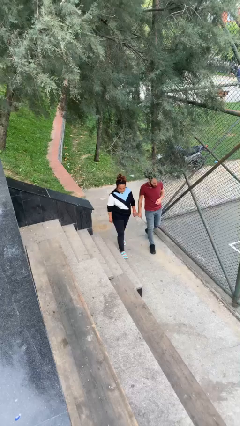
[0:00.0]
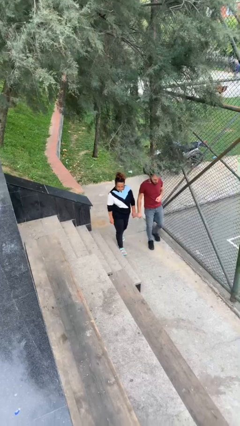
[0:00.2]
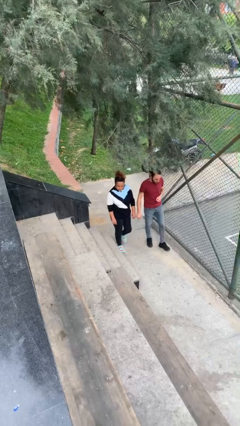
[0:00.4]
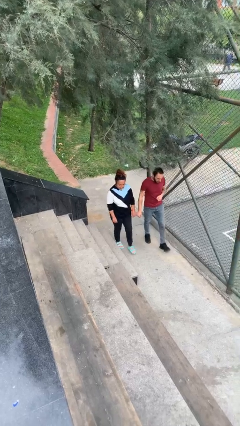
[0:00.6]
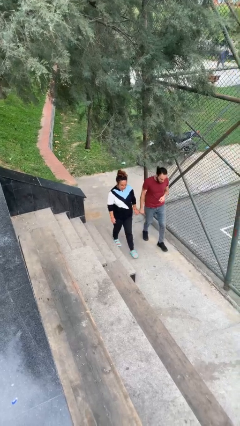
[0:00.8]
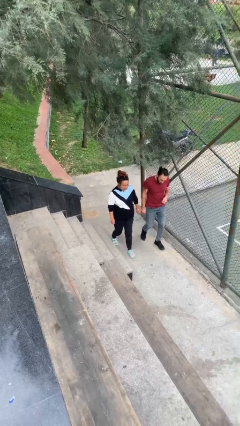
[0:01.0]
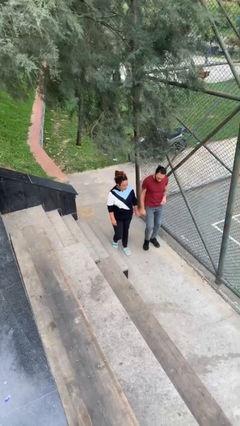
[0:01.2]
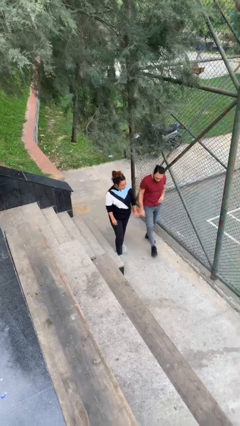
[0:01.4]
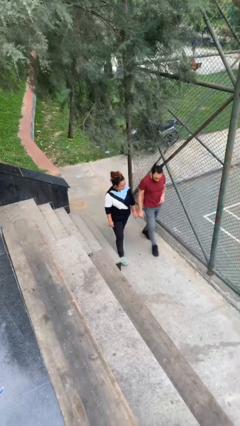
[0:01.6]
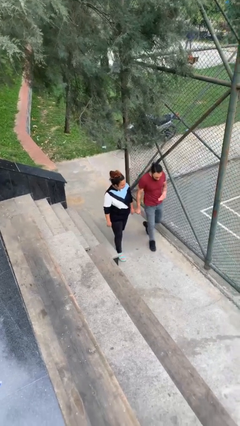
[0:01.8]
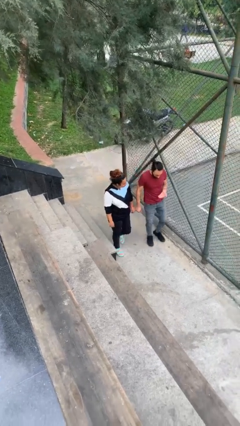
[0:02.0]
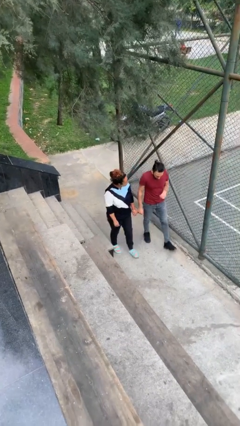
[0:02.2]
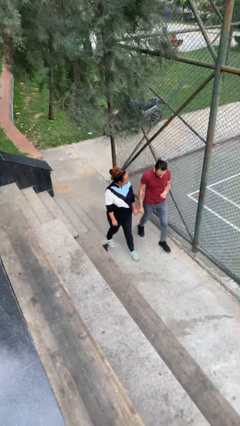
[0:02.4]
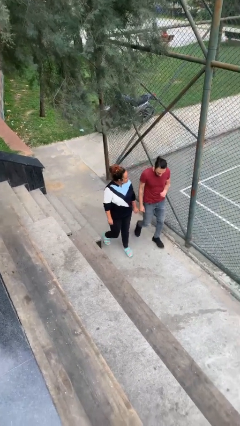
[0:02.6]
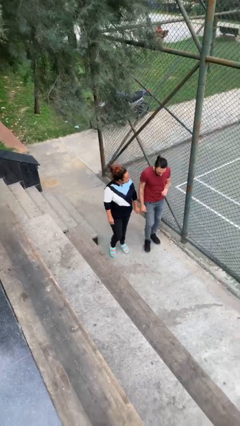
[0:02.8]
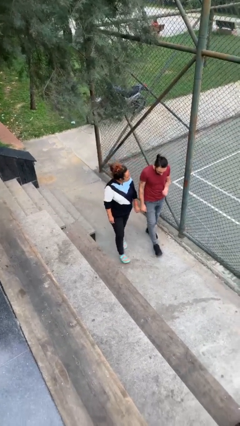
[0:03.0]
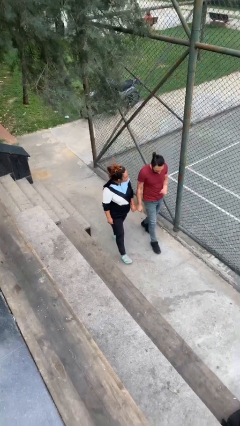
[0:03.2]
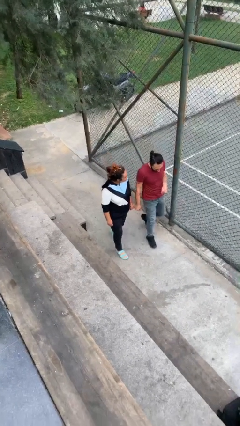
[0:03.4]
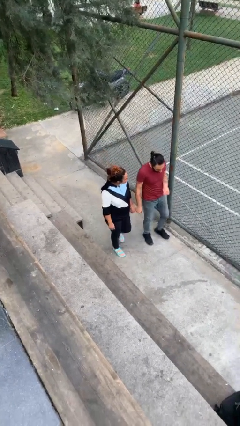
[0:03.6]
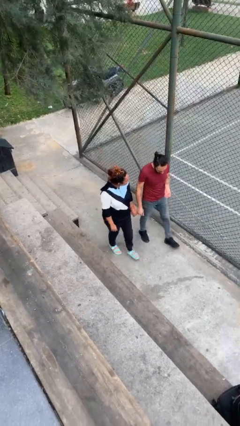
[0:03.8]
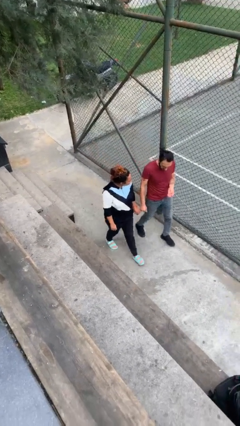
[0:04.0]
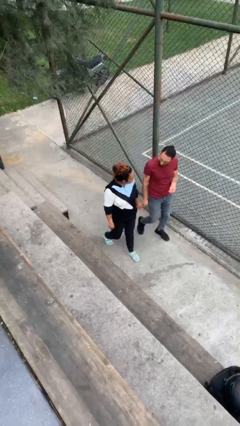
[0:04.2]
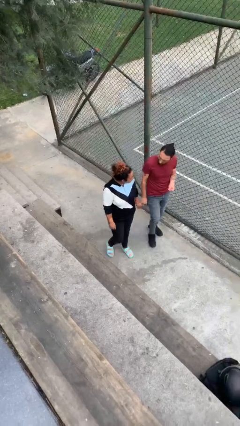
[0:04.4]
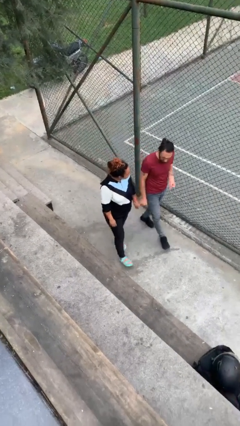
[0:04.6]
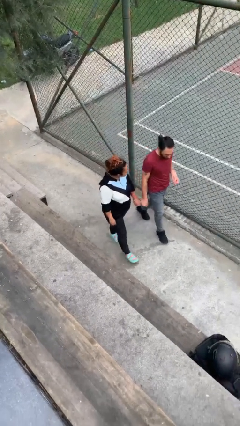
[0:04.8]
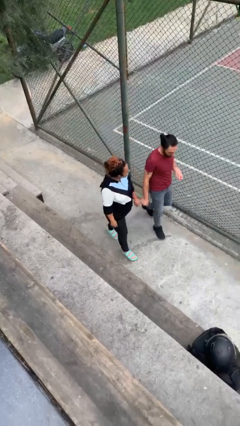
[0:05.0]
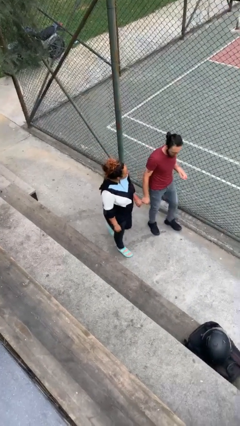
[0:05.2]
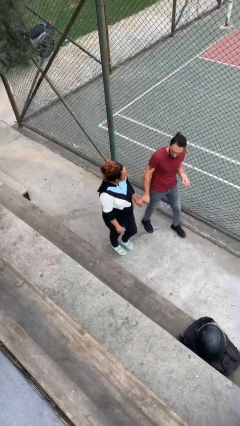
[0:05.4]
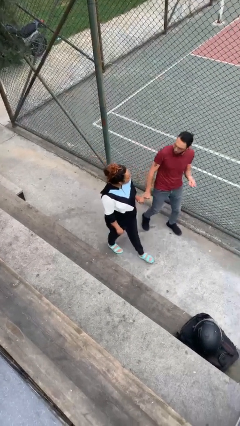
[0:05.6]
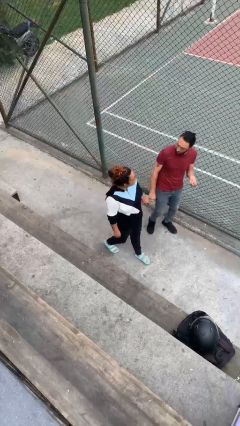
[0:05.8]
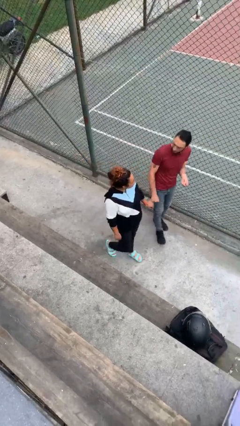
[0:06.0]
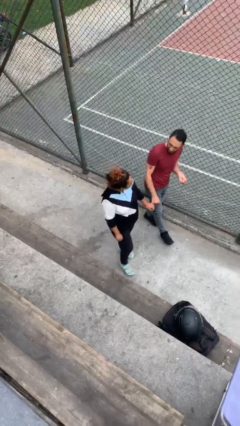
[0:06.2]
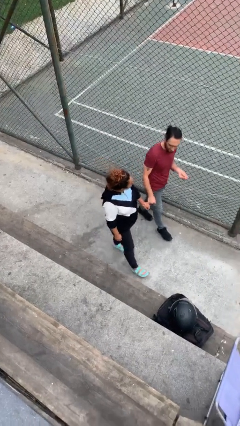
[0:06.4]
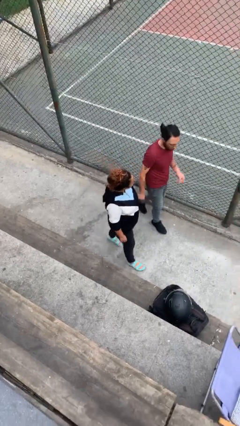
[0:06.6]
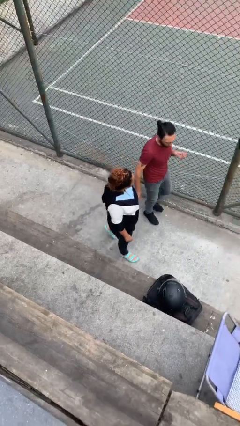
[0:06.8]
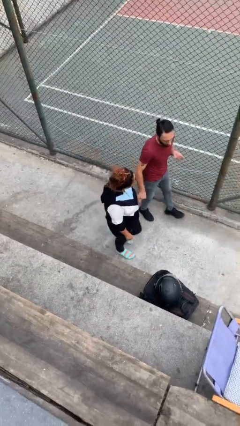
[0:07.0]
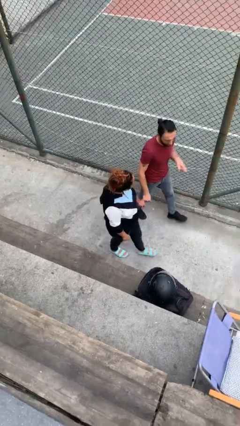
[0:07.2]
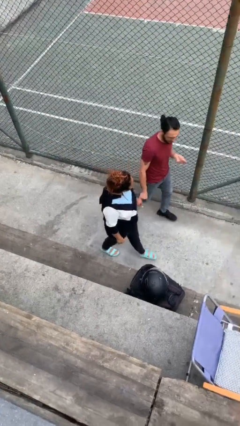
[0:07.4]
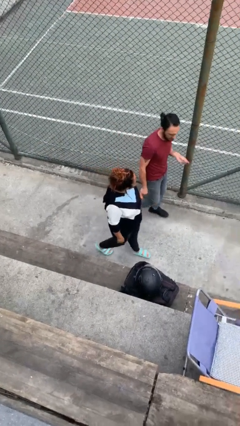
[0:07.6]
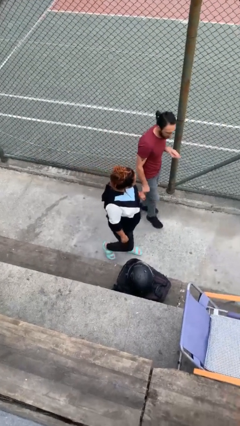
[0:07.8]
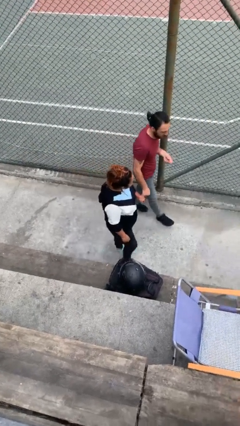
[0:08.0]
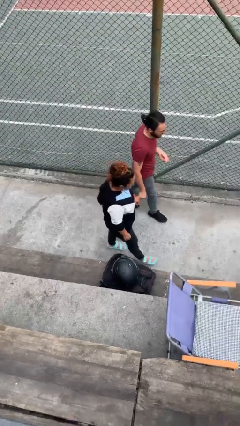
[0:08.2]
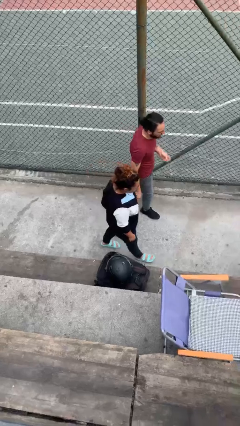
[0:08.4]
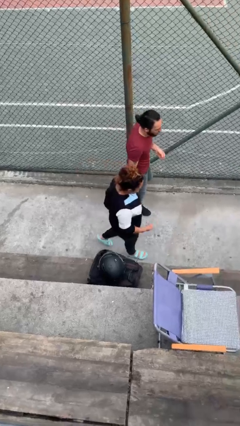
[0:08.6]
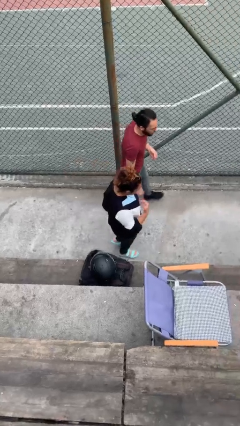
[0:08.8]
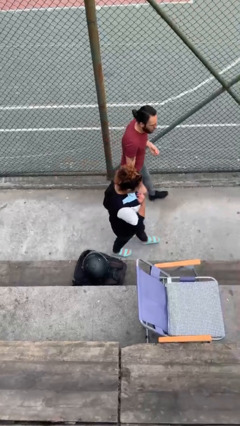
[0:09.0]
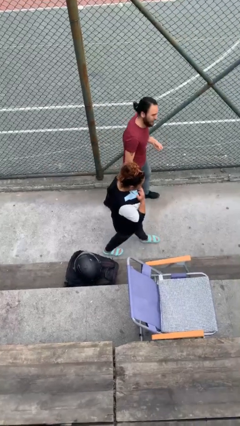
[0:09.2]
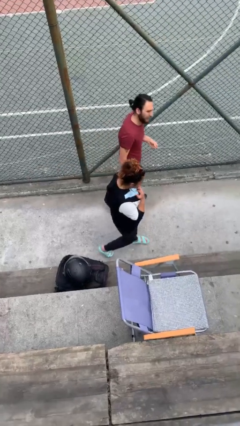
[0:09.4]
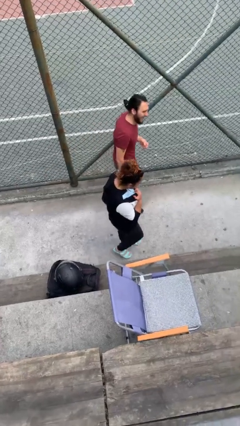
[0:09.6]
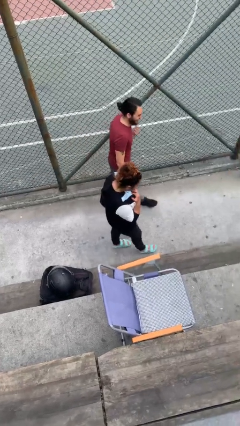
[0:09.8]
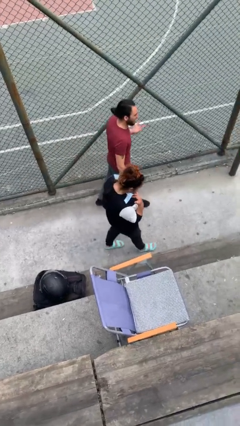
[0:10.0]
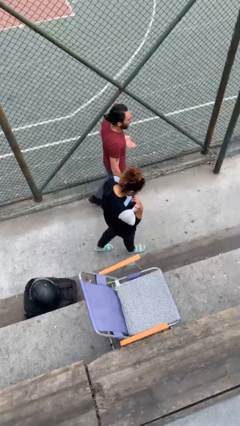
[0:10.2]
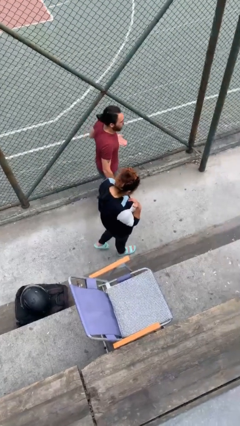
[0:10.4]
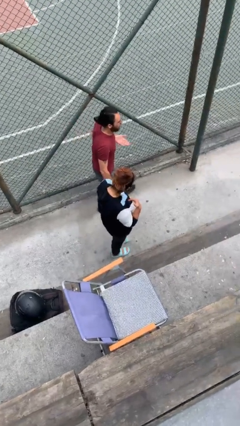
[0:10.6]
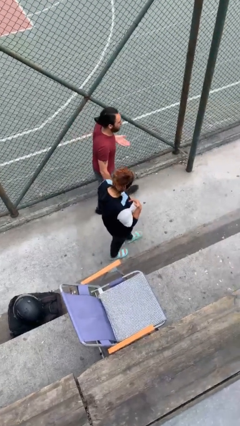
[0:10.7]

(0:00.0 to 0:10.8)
person holds hand

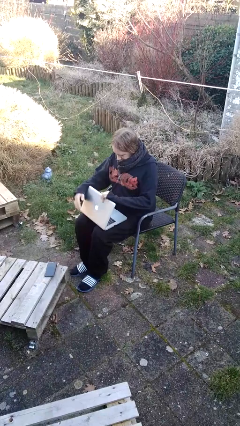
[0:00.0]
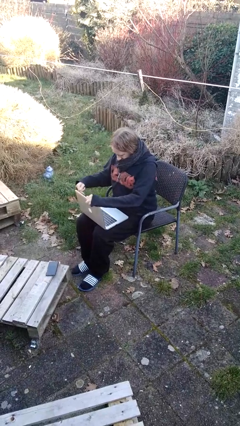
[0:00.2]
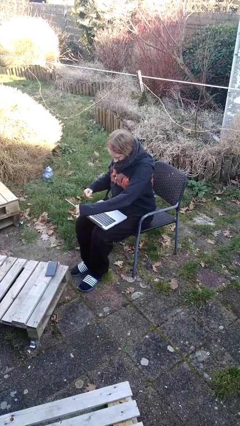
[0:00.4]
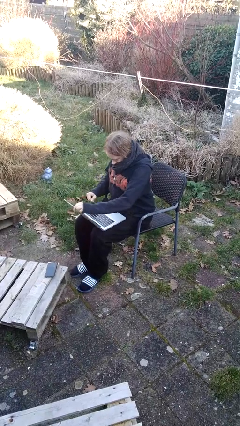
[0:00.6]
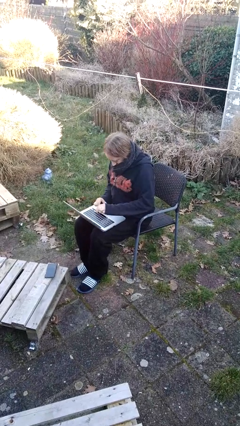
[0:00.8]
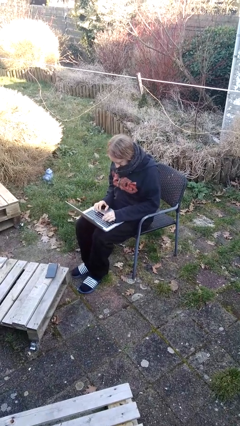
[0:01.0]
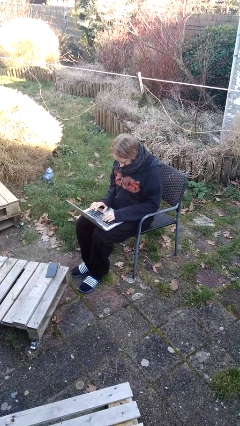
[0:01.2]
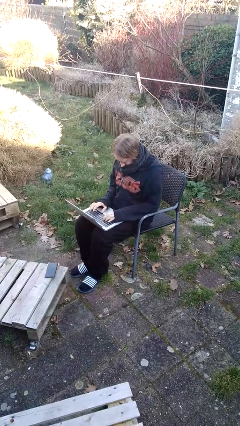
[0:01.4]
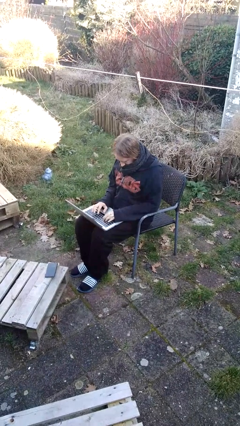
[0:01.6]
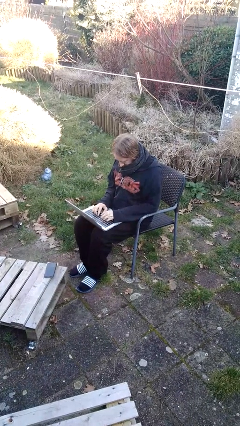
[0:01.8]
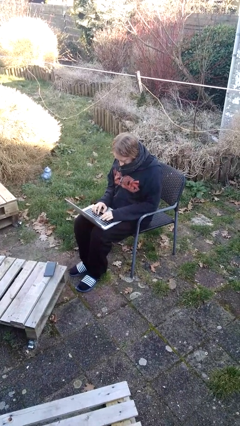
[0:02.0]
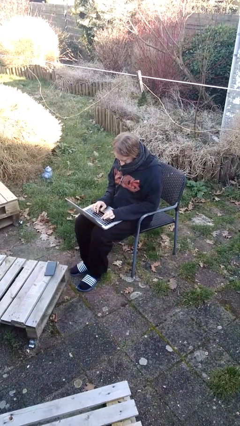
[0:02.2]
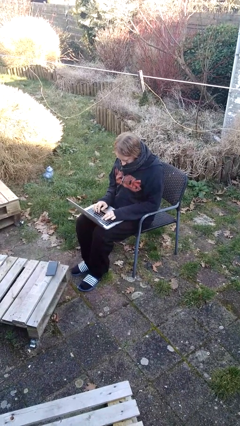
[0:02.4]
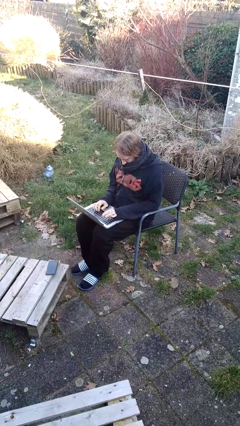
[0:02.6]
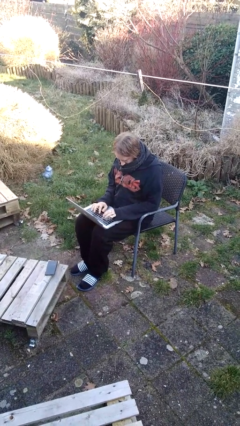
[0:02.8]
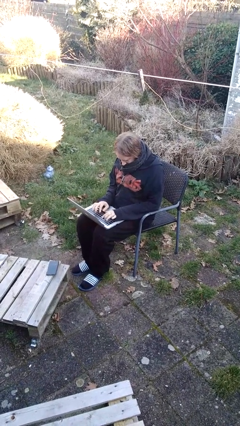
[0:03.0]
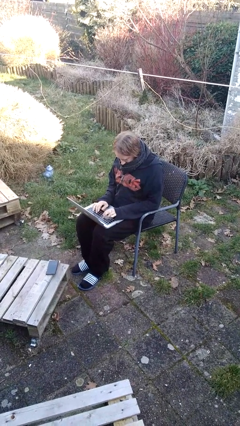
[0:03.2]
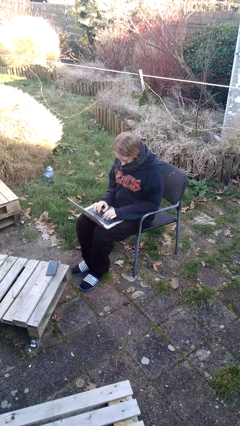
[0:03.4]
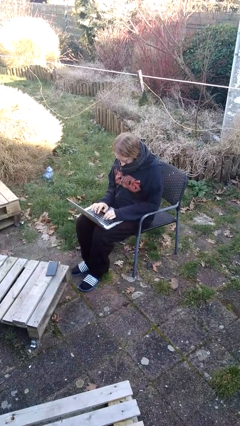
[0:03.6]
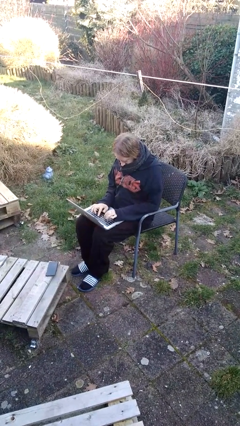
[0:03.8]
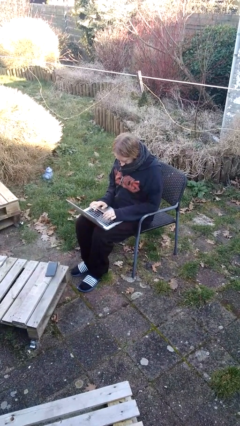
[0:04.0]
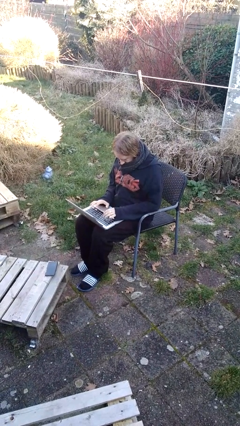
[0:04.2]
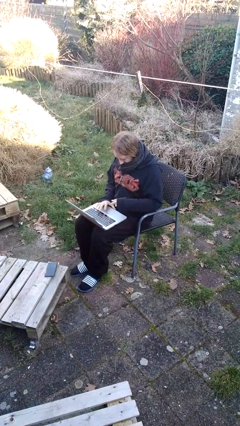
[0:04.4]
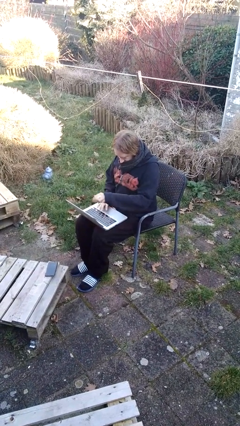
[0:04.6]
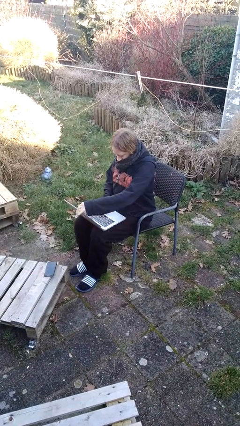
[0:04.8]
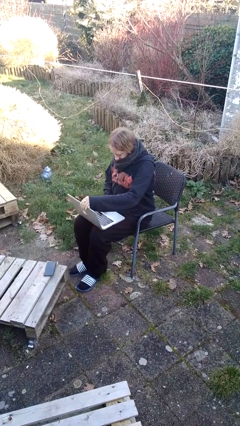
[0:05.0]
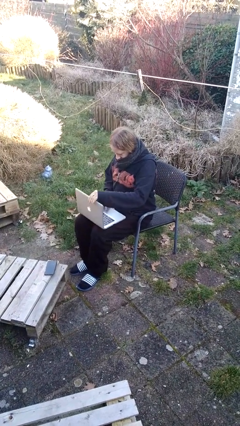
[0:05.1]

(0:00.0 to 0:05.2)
person interacts with laptop

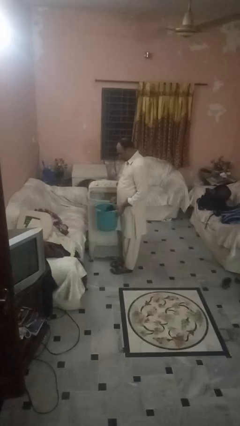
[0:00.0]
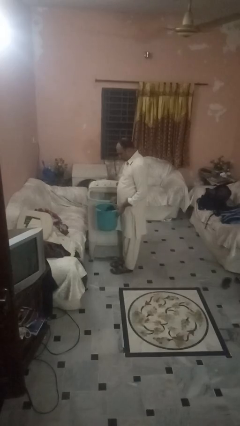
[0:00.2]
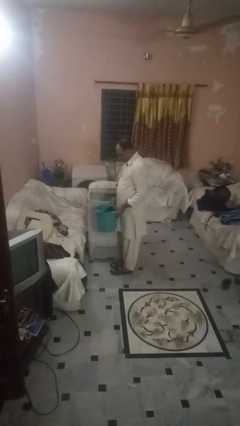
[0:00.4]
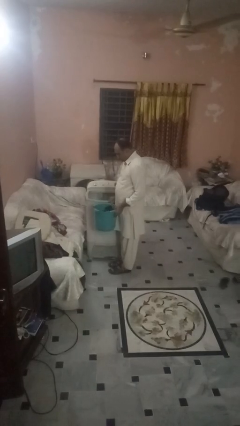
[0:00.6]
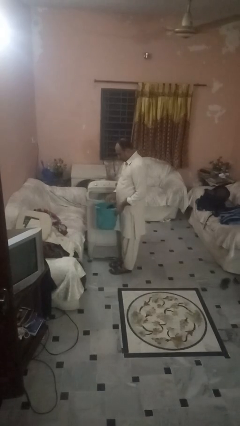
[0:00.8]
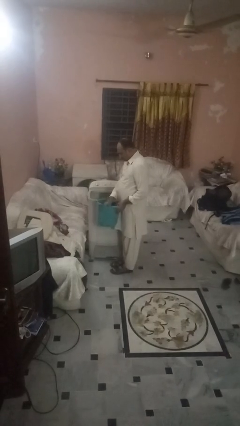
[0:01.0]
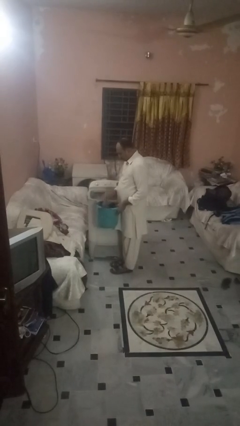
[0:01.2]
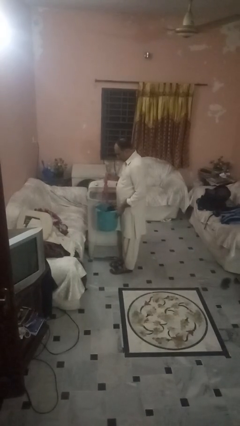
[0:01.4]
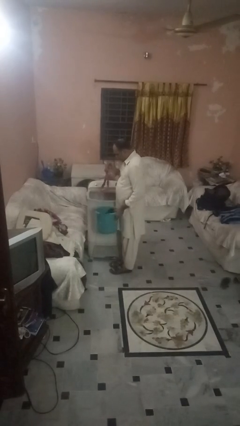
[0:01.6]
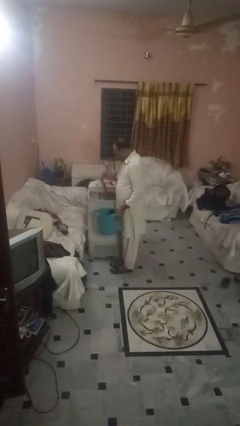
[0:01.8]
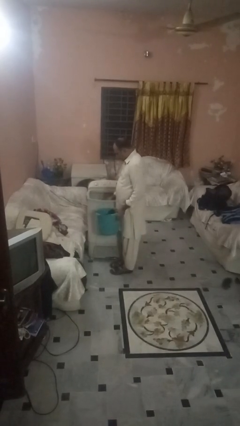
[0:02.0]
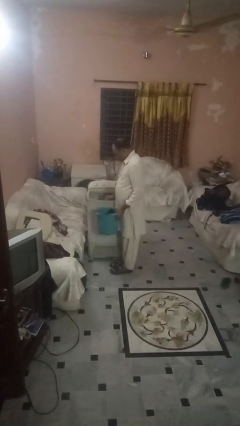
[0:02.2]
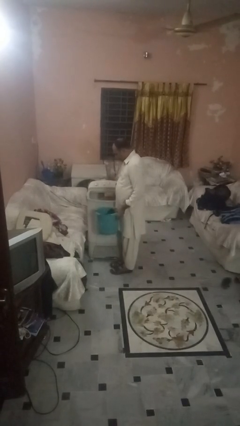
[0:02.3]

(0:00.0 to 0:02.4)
person loads clotheswasher
